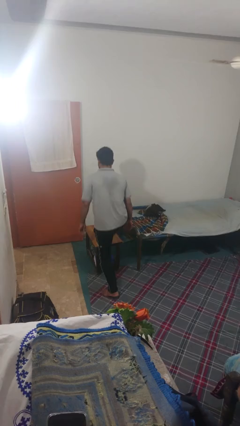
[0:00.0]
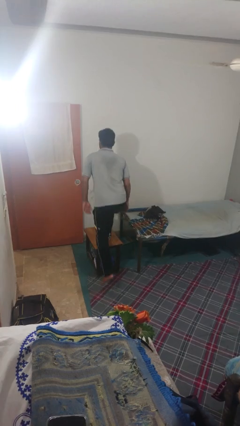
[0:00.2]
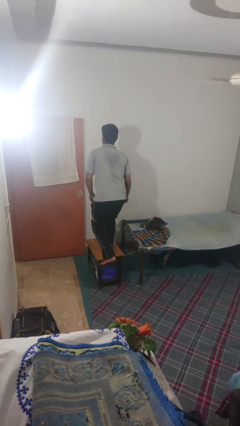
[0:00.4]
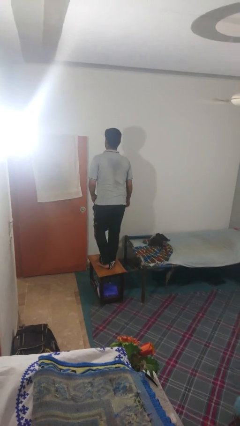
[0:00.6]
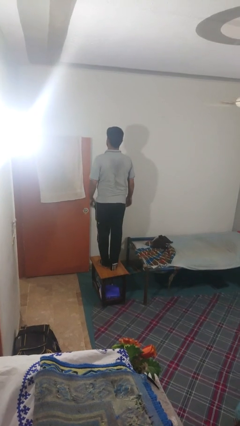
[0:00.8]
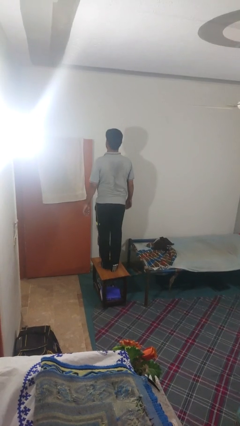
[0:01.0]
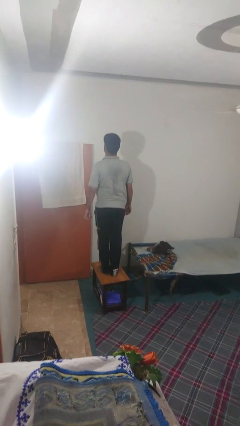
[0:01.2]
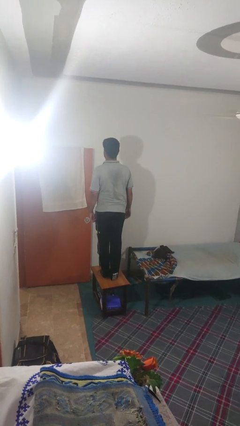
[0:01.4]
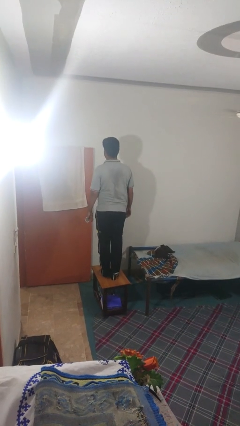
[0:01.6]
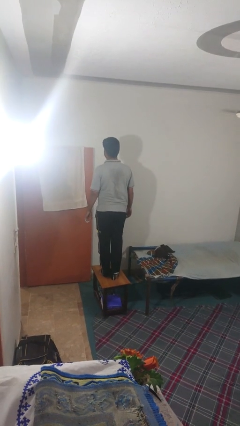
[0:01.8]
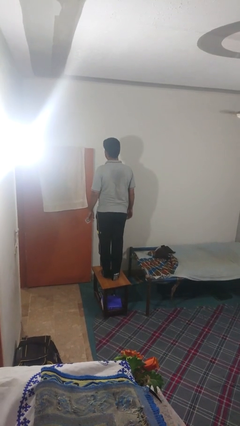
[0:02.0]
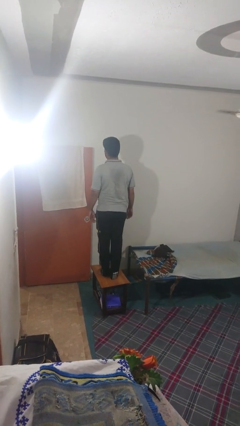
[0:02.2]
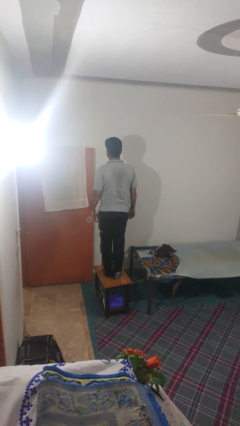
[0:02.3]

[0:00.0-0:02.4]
person climbs on table

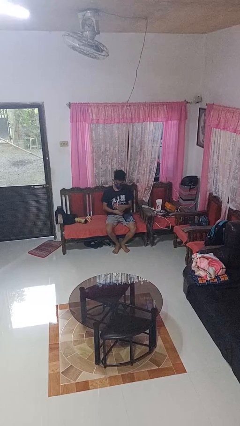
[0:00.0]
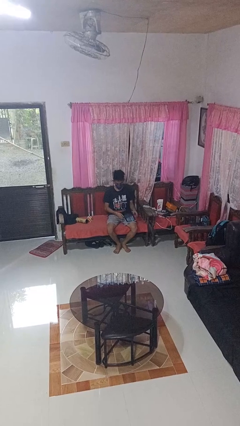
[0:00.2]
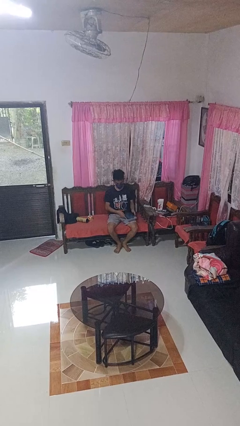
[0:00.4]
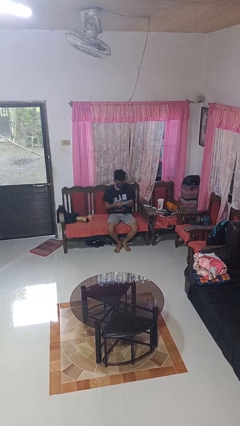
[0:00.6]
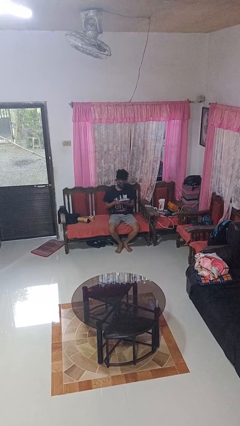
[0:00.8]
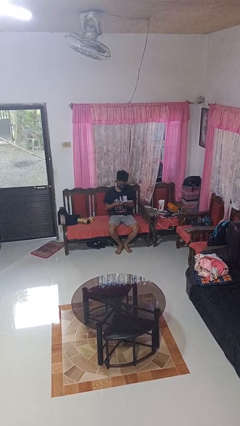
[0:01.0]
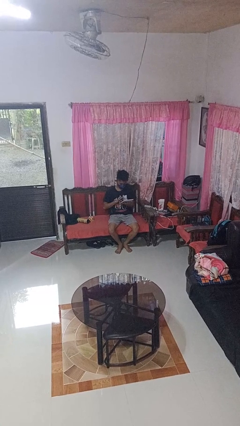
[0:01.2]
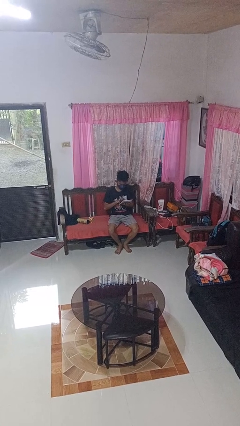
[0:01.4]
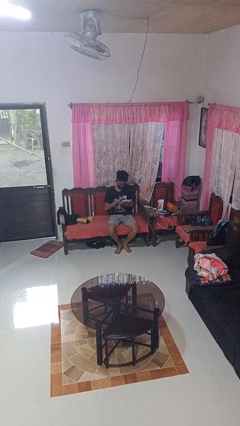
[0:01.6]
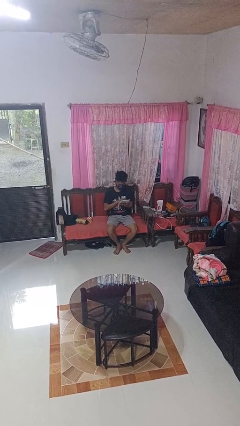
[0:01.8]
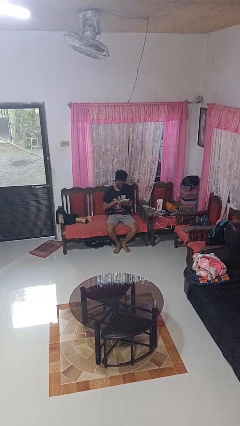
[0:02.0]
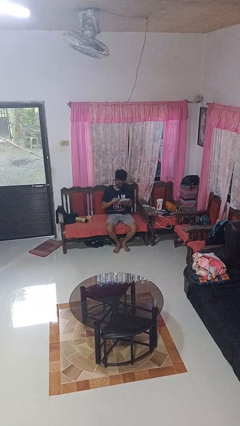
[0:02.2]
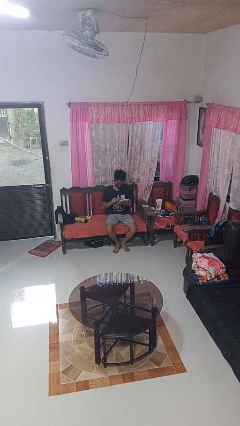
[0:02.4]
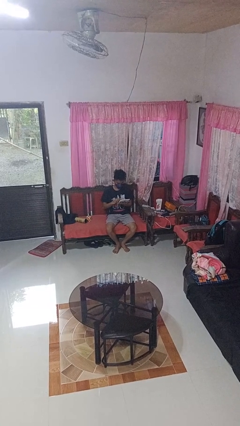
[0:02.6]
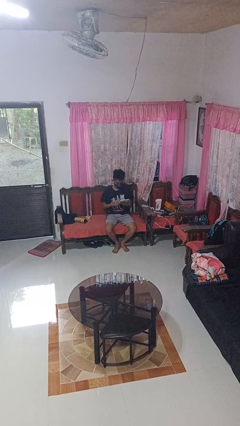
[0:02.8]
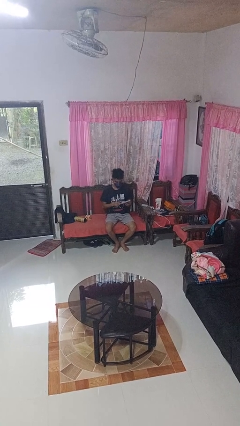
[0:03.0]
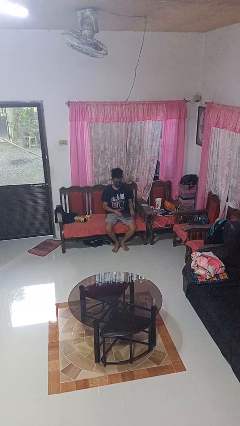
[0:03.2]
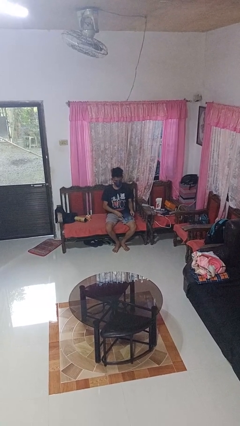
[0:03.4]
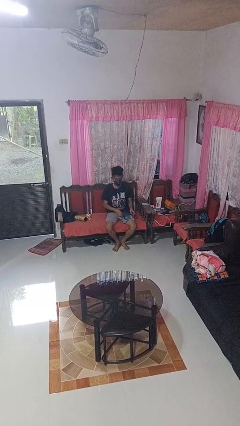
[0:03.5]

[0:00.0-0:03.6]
person interacts with tablet

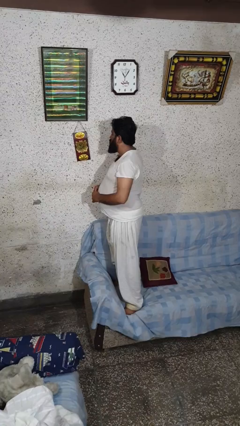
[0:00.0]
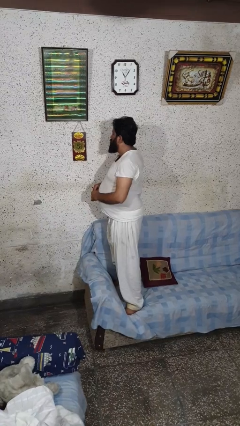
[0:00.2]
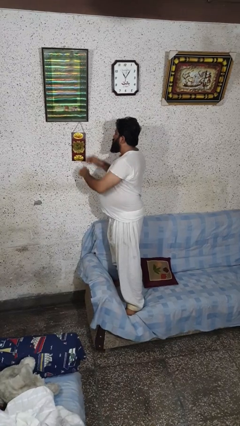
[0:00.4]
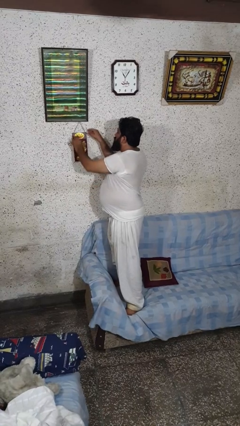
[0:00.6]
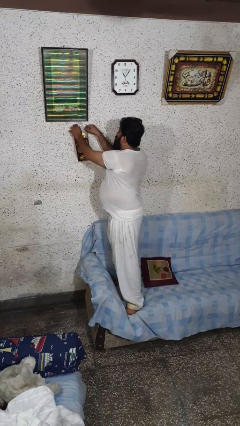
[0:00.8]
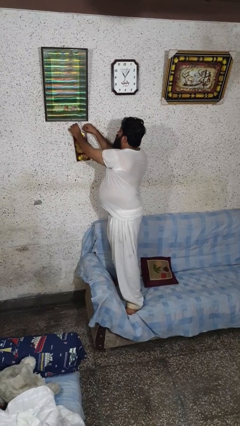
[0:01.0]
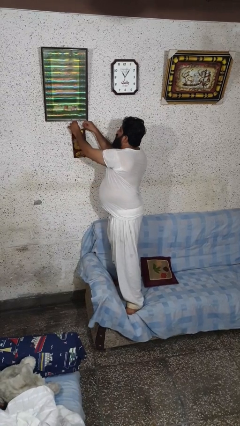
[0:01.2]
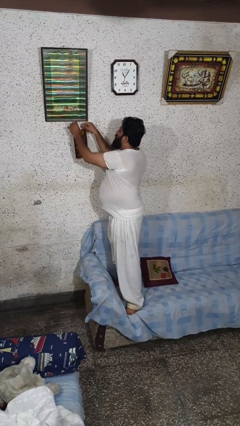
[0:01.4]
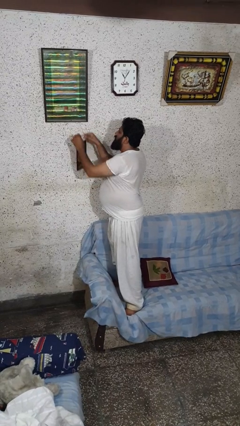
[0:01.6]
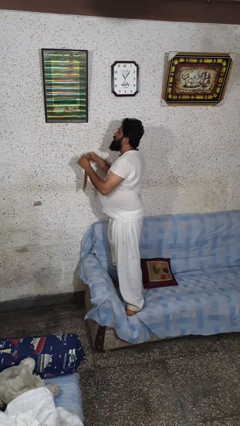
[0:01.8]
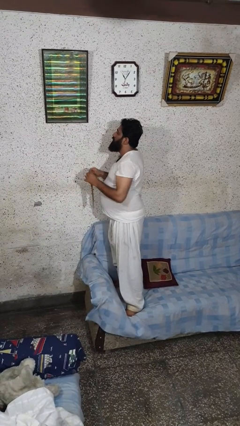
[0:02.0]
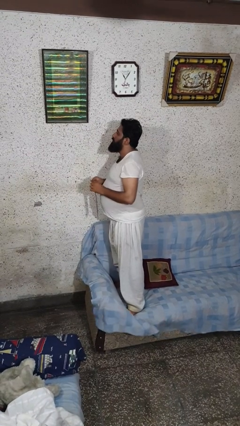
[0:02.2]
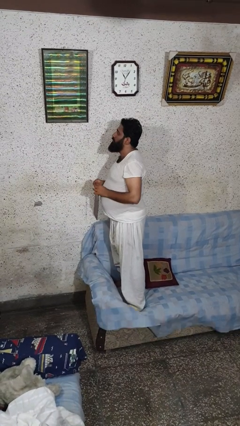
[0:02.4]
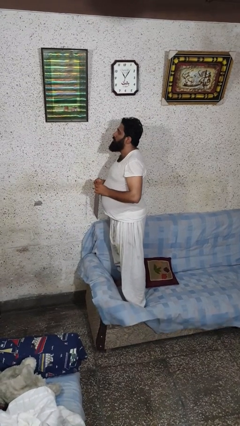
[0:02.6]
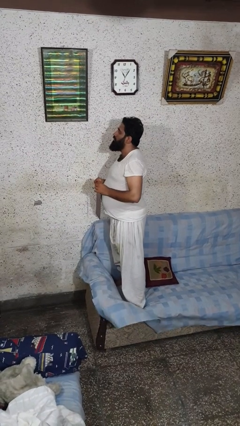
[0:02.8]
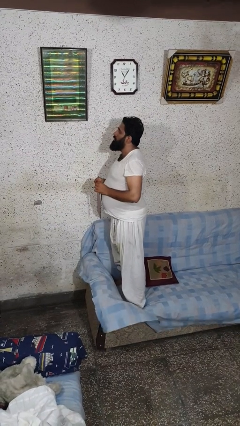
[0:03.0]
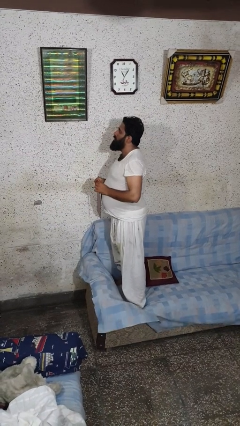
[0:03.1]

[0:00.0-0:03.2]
person takes down picture frame

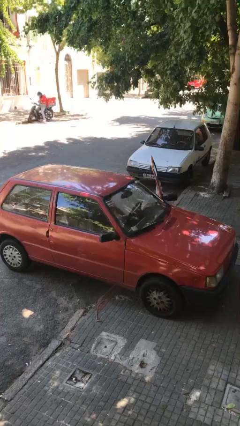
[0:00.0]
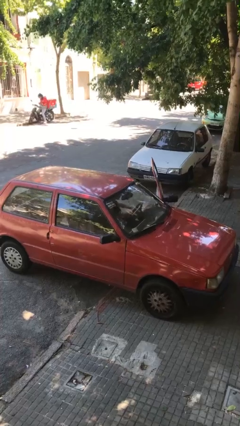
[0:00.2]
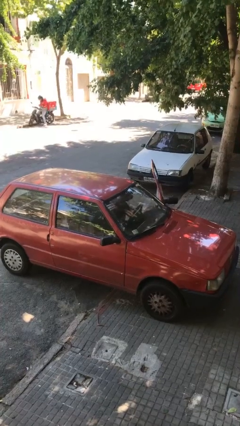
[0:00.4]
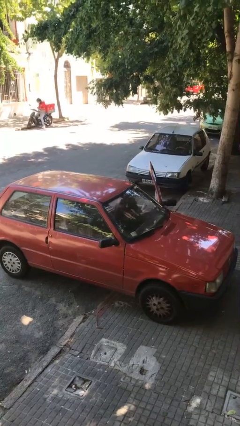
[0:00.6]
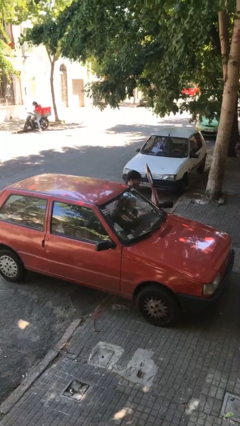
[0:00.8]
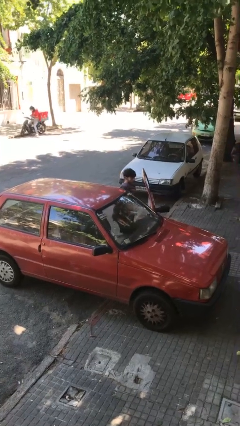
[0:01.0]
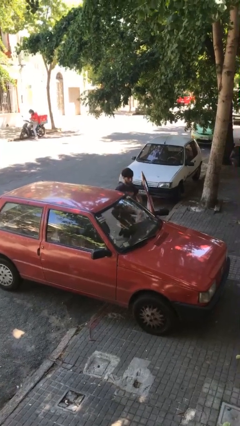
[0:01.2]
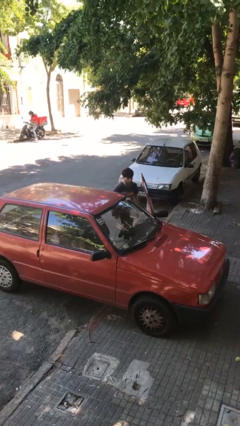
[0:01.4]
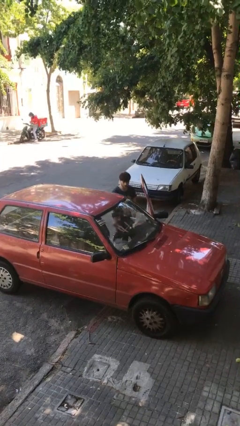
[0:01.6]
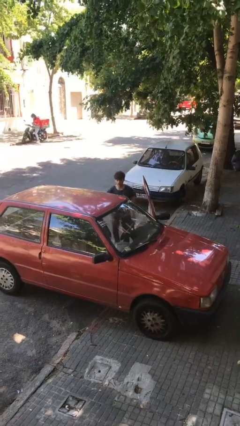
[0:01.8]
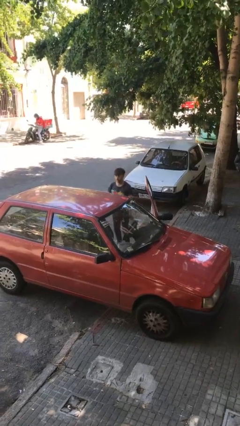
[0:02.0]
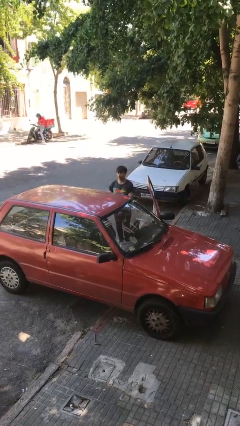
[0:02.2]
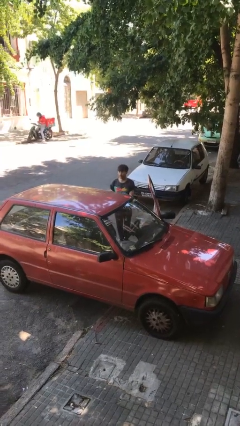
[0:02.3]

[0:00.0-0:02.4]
person exits car

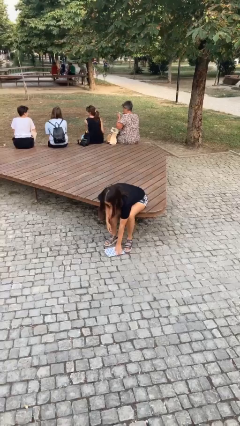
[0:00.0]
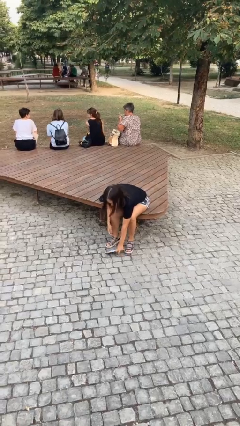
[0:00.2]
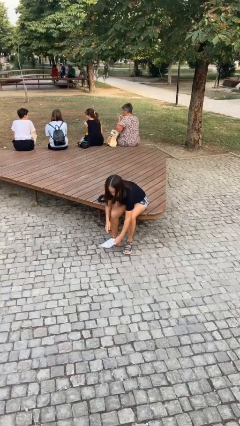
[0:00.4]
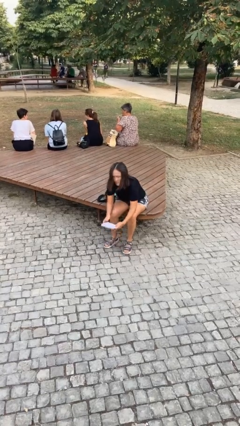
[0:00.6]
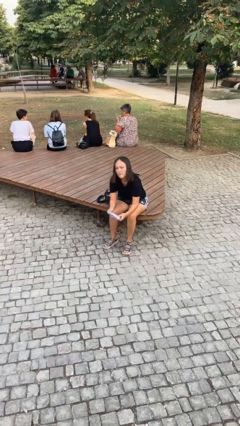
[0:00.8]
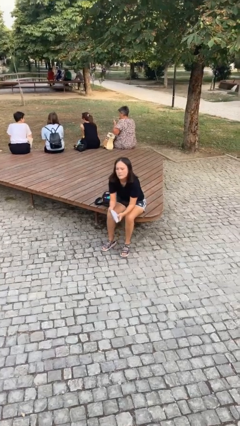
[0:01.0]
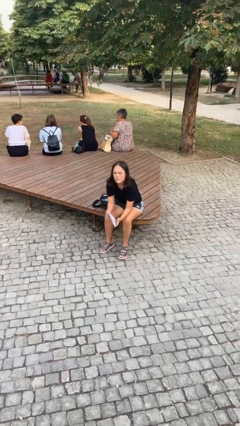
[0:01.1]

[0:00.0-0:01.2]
person picks up object from floor

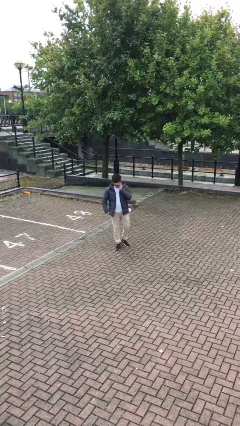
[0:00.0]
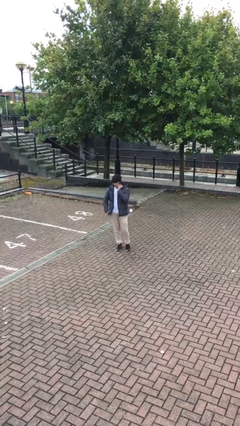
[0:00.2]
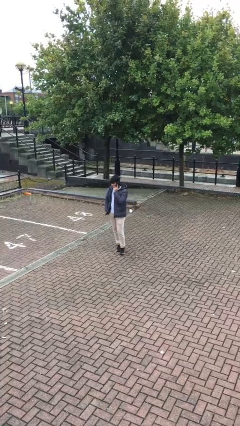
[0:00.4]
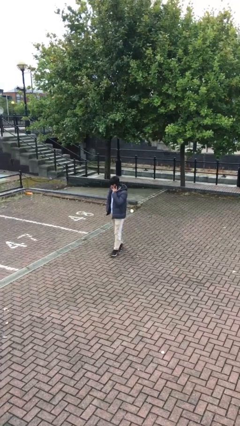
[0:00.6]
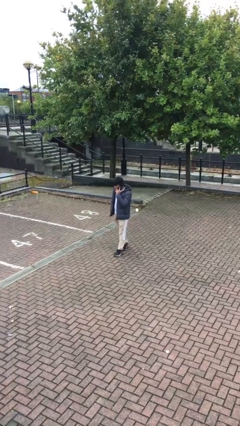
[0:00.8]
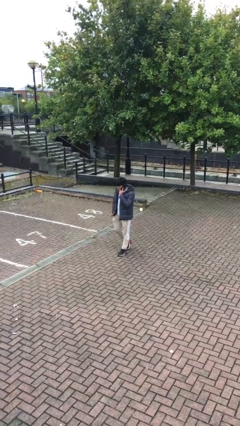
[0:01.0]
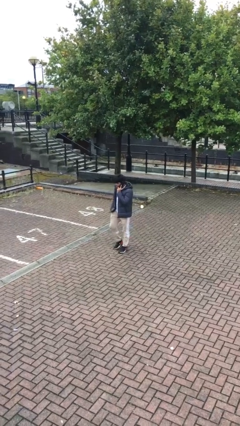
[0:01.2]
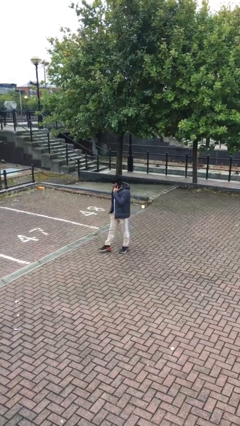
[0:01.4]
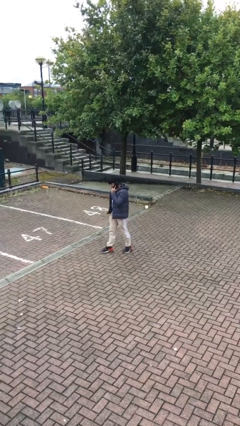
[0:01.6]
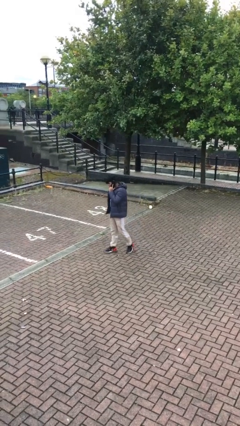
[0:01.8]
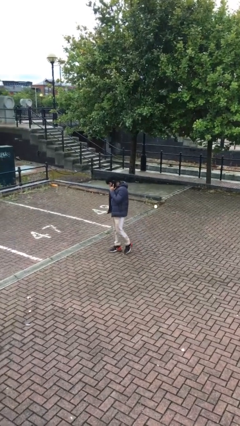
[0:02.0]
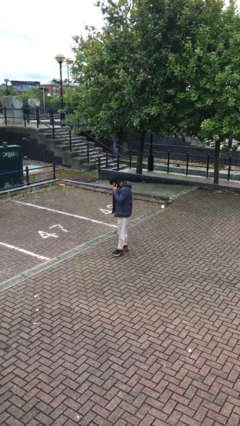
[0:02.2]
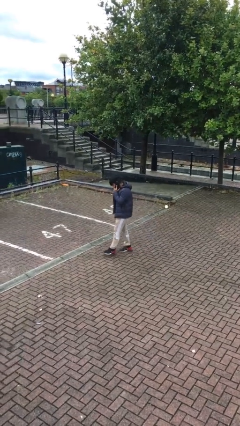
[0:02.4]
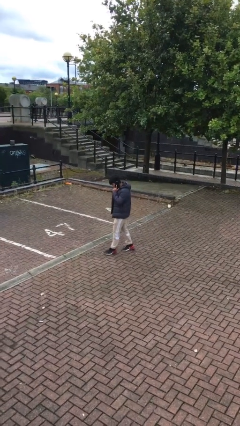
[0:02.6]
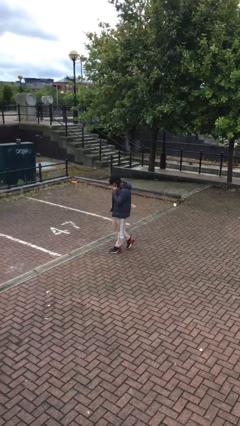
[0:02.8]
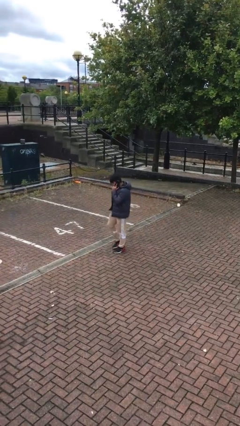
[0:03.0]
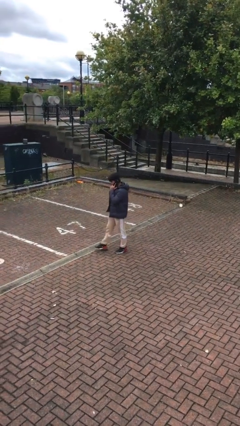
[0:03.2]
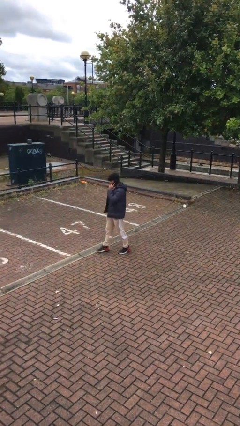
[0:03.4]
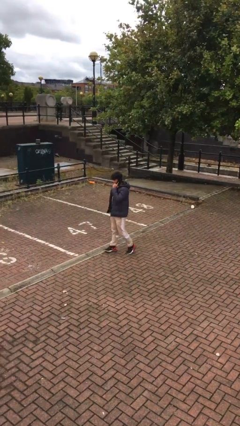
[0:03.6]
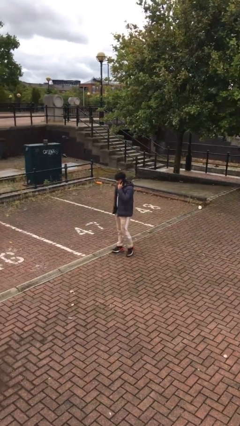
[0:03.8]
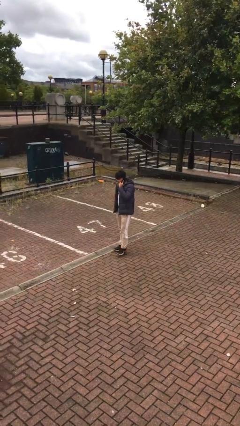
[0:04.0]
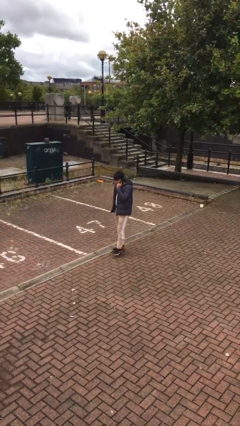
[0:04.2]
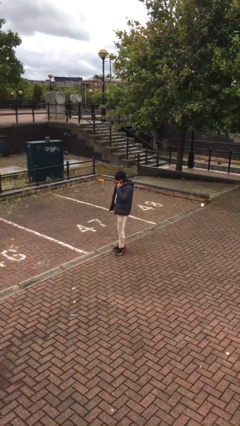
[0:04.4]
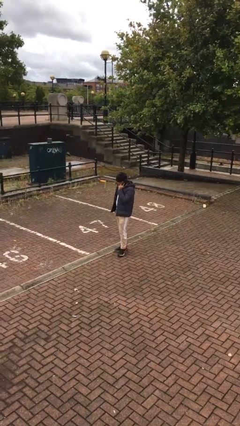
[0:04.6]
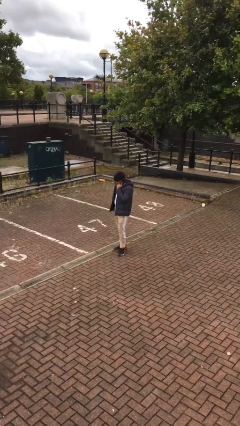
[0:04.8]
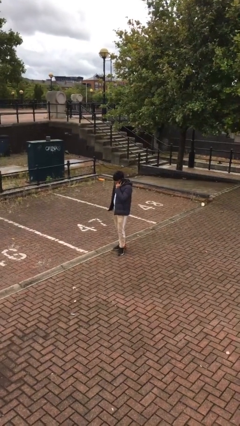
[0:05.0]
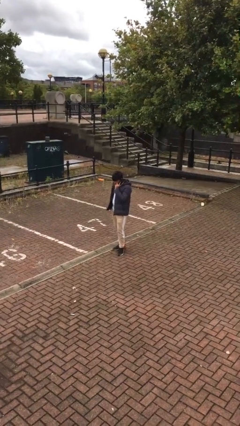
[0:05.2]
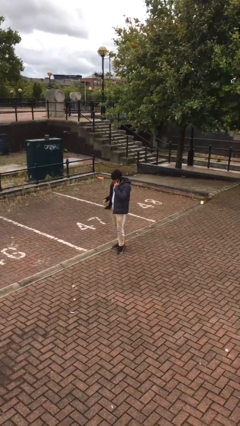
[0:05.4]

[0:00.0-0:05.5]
person talks on phone
